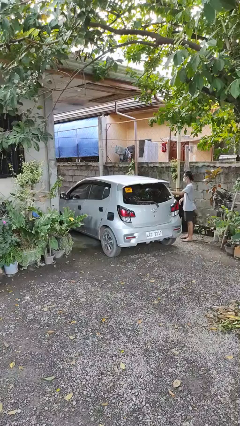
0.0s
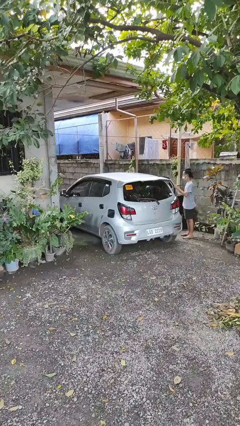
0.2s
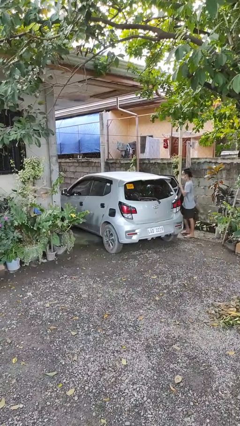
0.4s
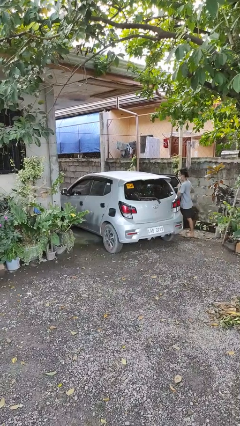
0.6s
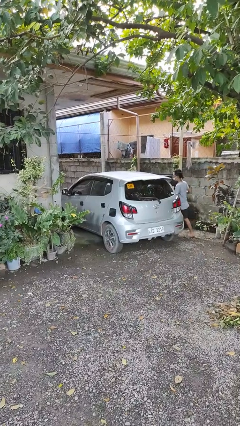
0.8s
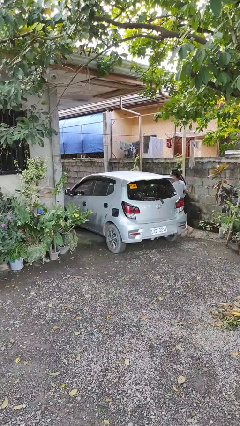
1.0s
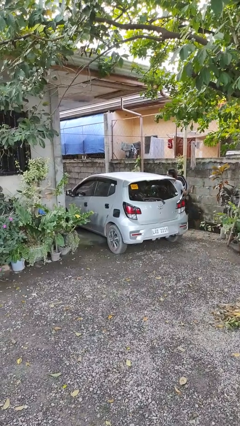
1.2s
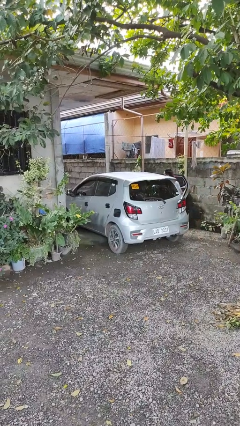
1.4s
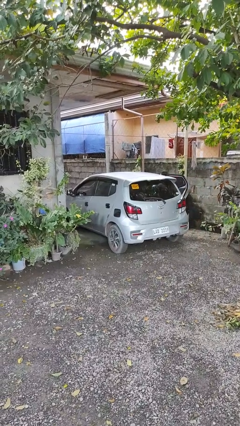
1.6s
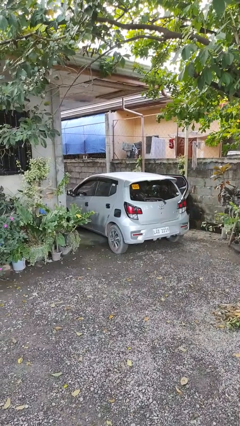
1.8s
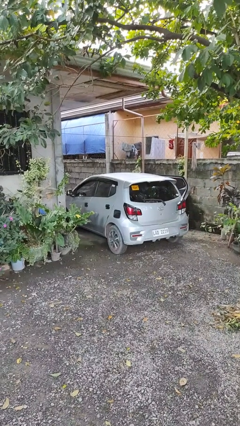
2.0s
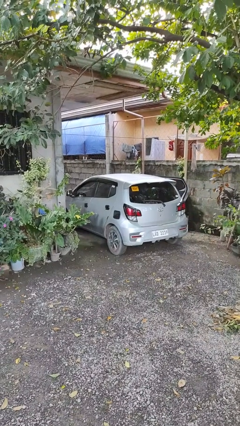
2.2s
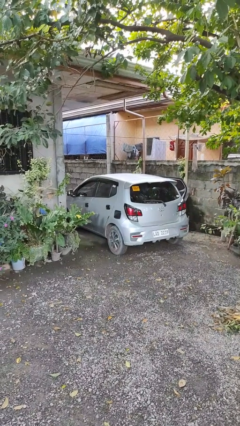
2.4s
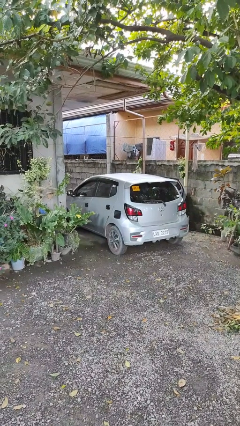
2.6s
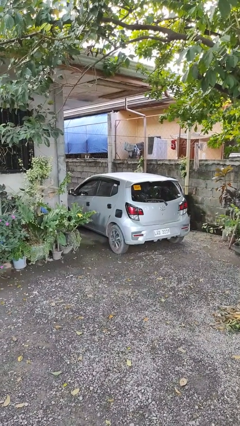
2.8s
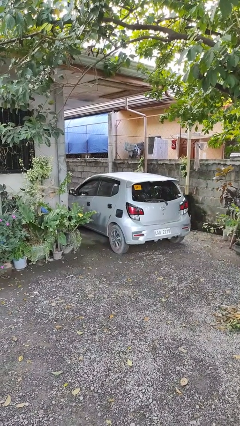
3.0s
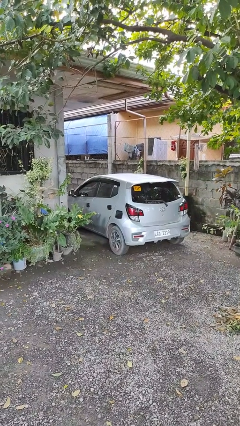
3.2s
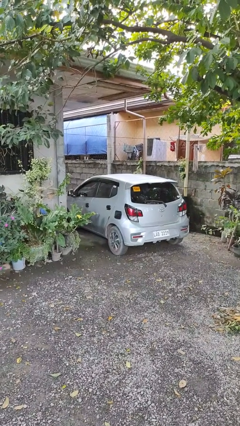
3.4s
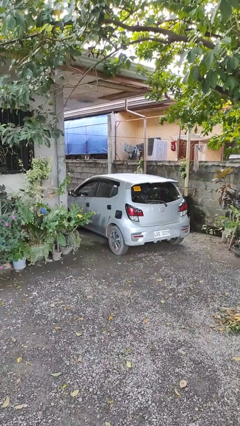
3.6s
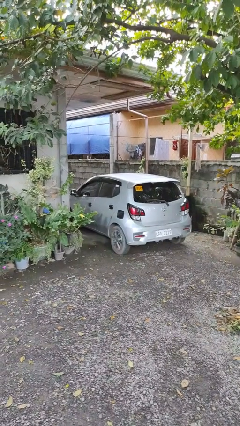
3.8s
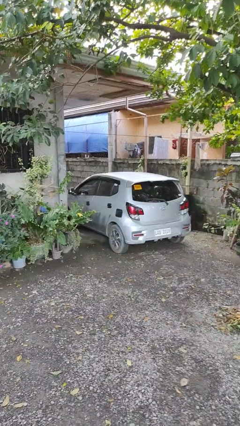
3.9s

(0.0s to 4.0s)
car picks up person

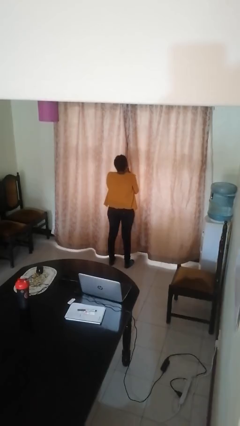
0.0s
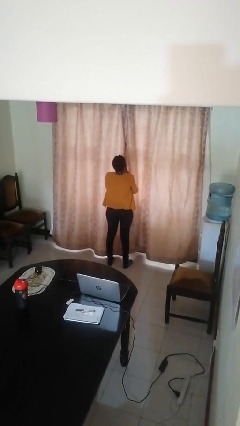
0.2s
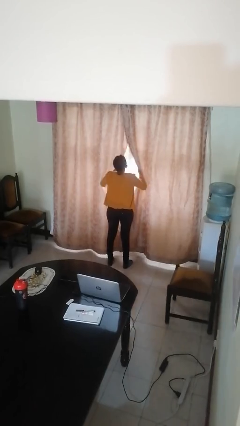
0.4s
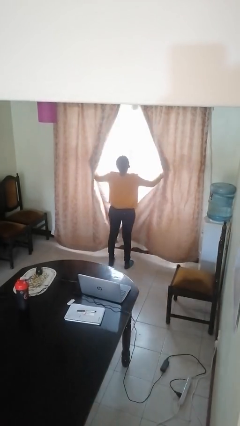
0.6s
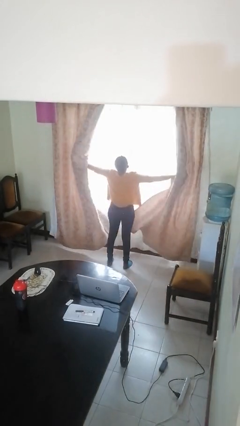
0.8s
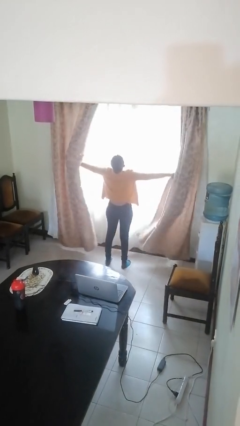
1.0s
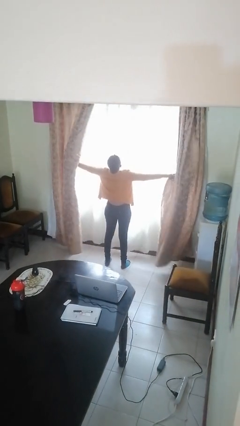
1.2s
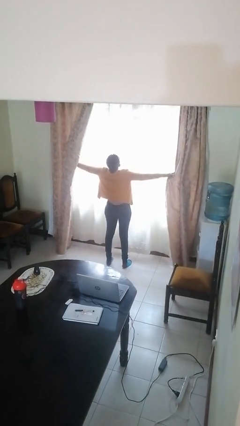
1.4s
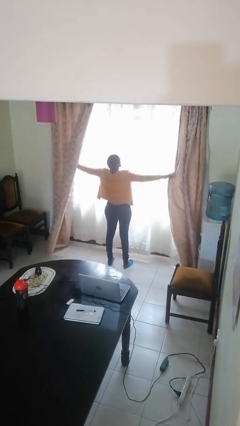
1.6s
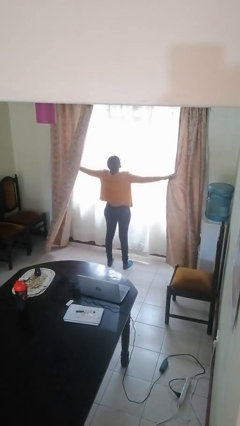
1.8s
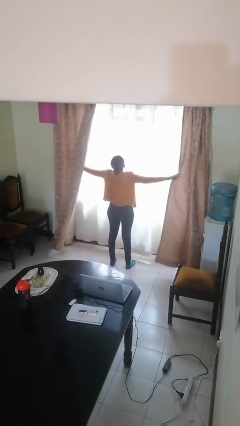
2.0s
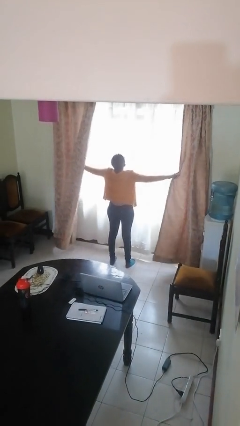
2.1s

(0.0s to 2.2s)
person opens curtains

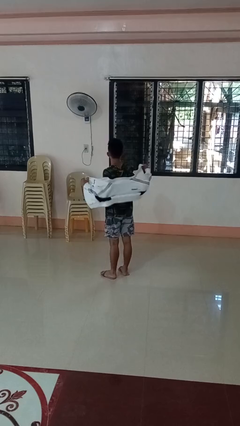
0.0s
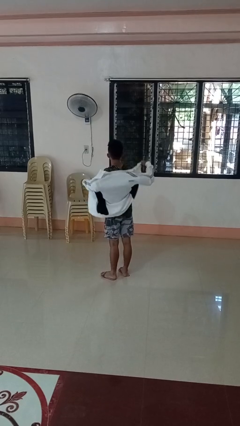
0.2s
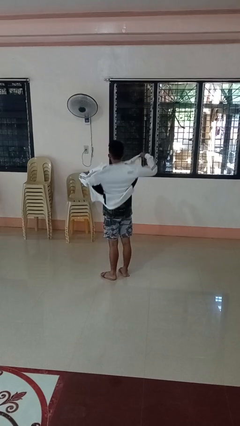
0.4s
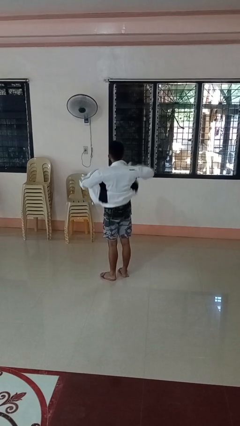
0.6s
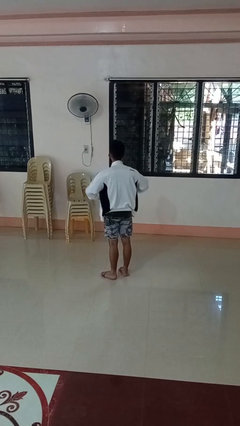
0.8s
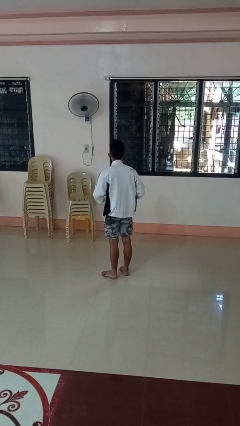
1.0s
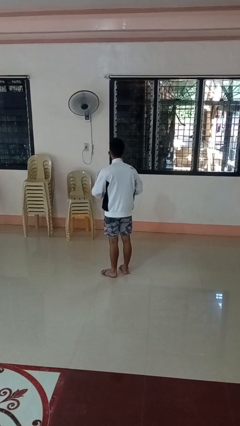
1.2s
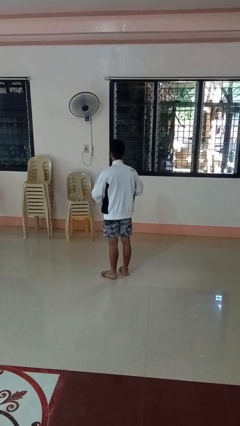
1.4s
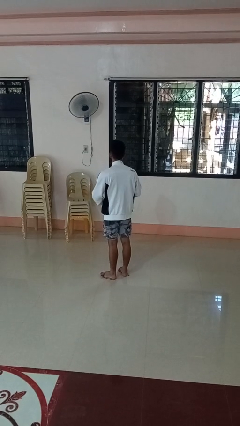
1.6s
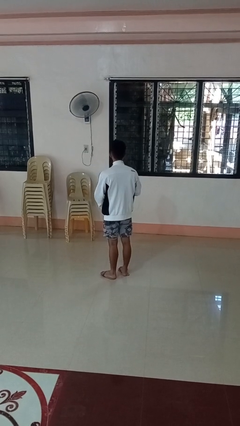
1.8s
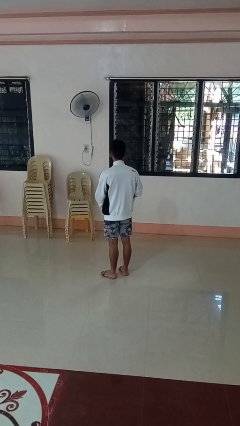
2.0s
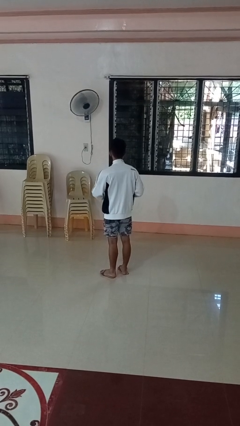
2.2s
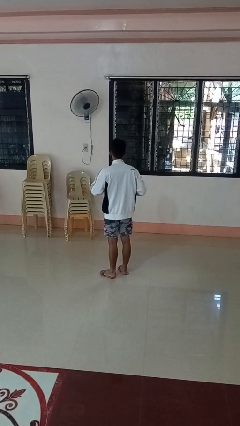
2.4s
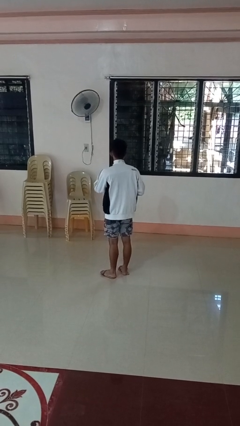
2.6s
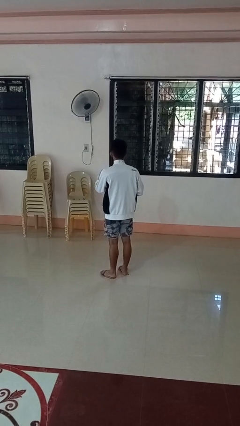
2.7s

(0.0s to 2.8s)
person puts on jacket

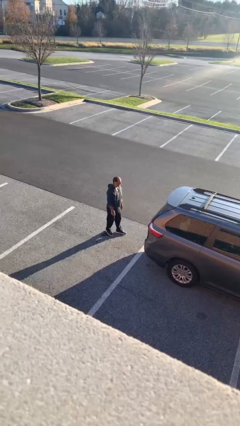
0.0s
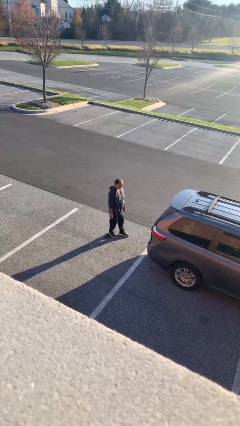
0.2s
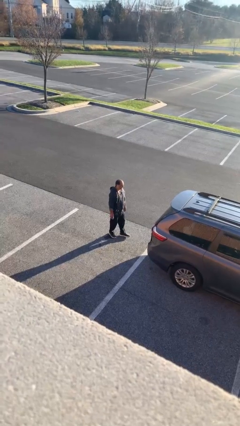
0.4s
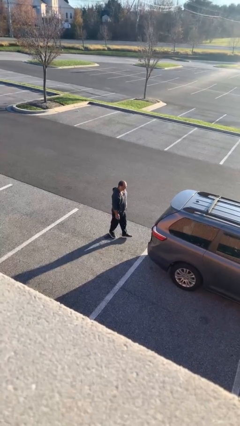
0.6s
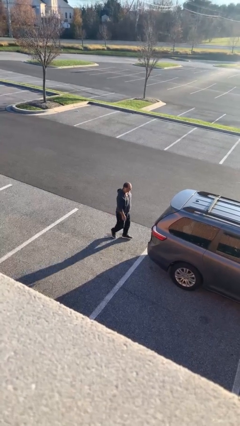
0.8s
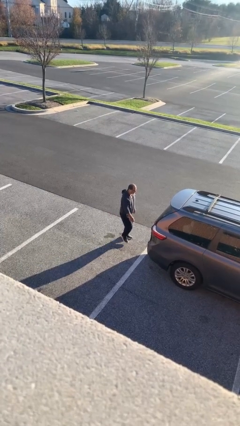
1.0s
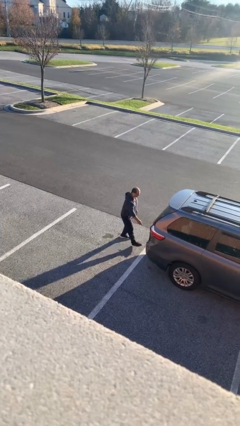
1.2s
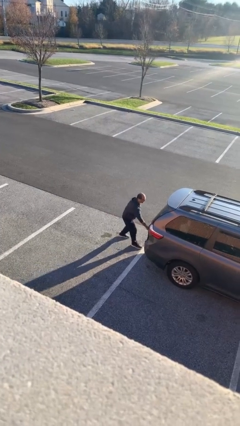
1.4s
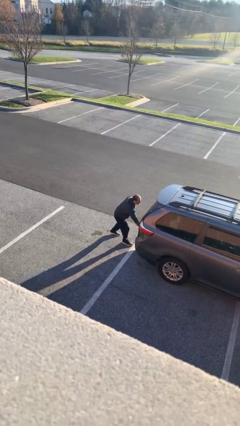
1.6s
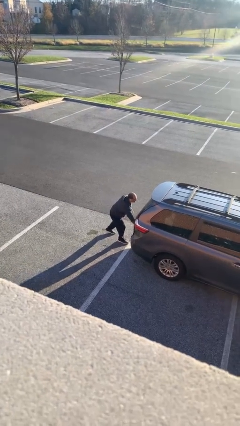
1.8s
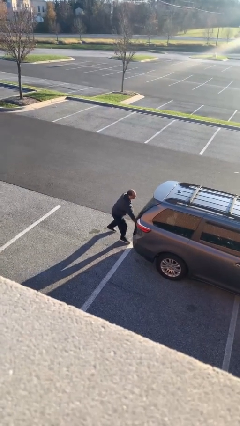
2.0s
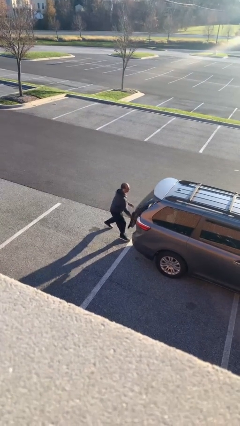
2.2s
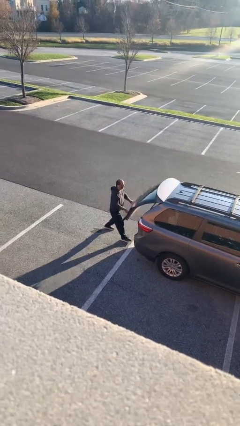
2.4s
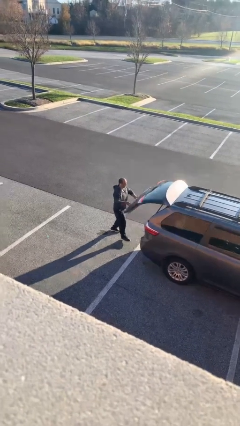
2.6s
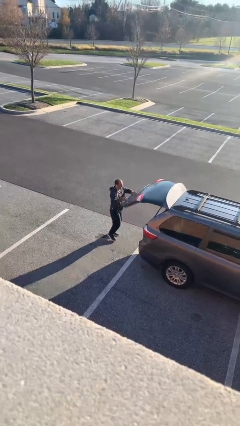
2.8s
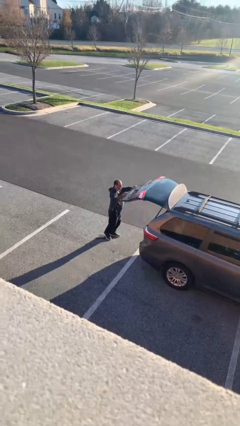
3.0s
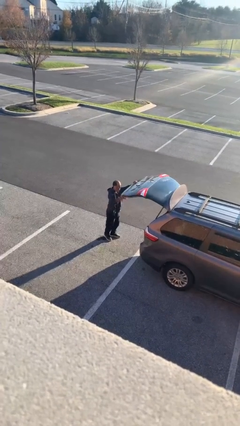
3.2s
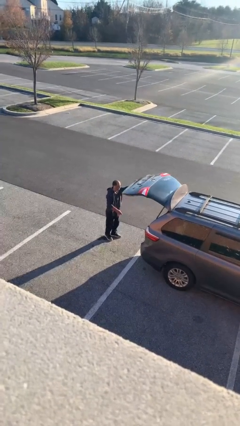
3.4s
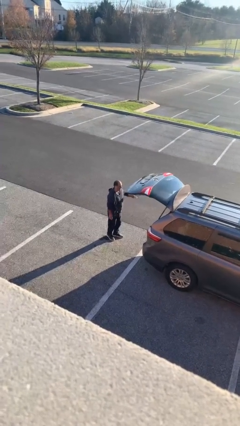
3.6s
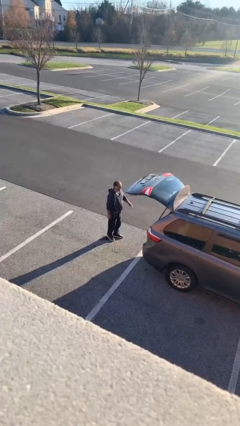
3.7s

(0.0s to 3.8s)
person opens car trunk

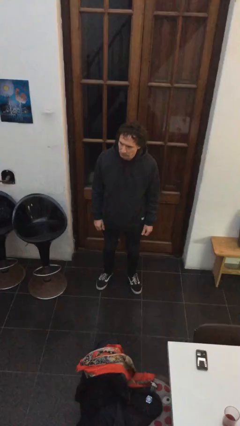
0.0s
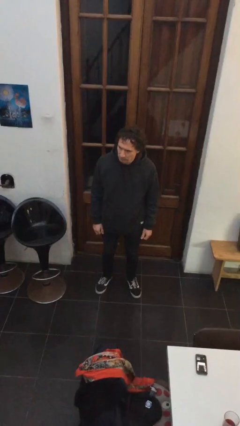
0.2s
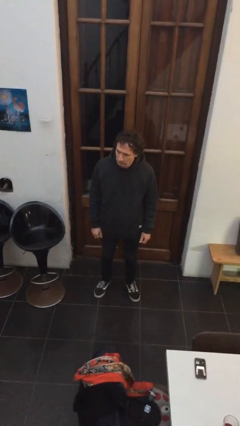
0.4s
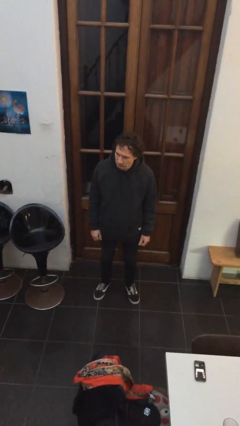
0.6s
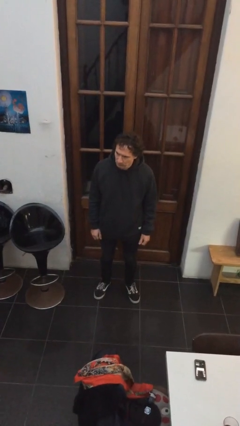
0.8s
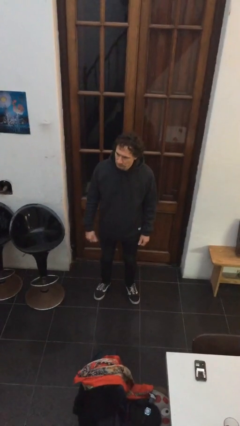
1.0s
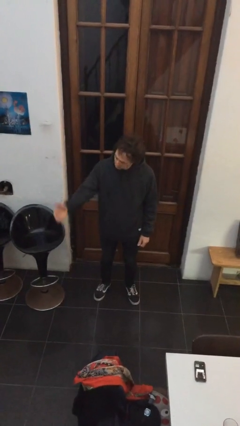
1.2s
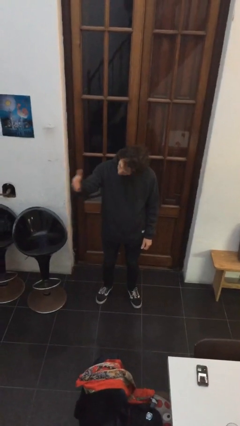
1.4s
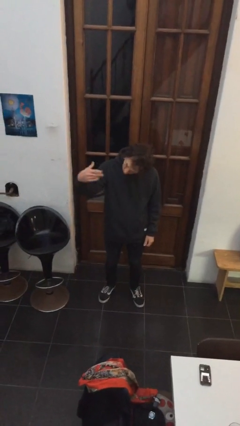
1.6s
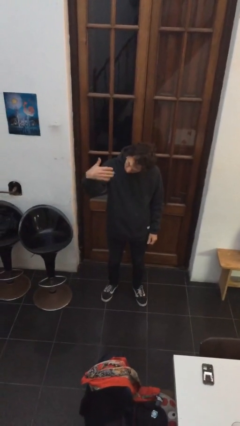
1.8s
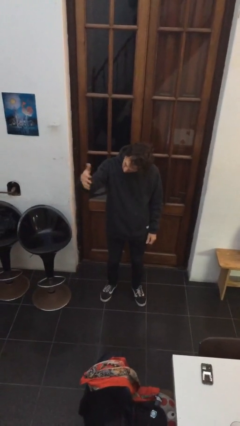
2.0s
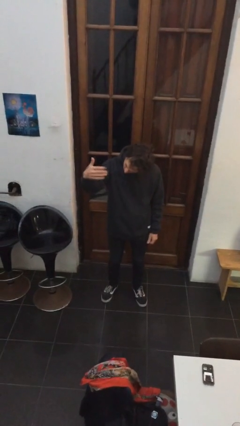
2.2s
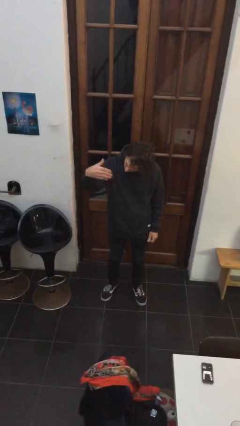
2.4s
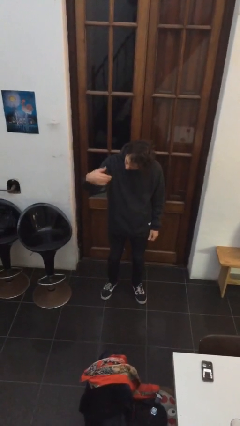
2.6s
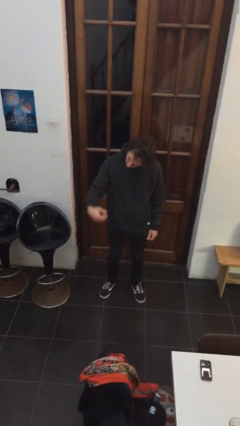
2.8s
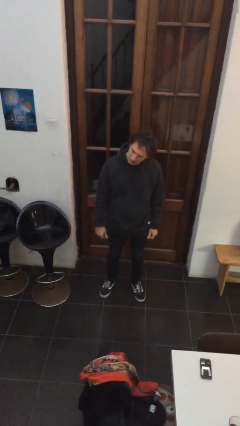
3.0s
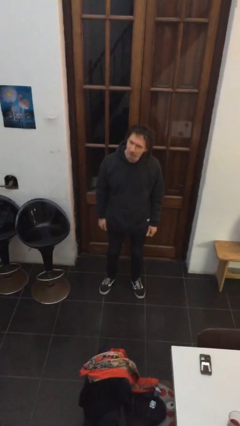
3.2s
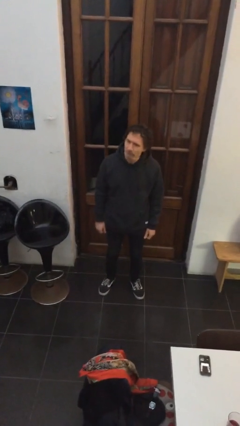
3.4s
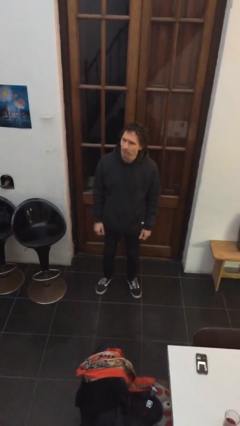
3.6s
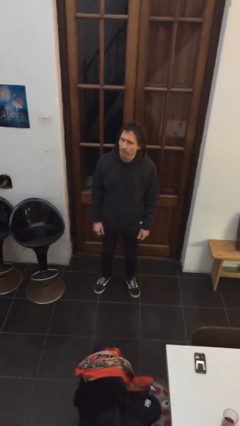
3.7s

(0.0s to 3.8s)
person gestures come here

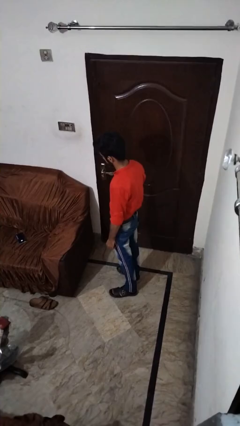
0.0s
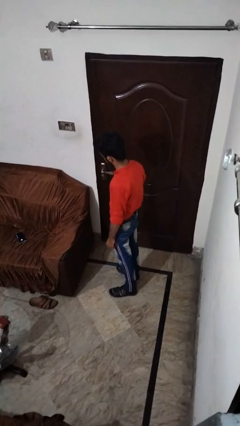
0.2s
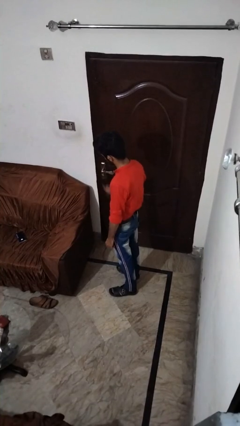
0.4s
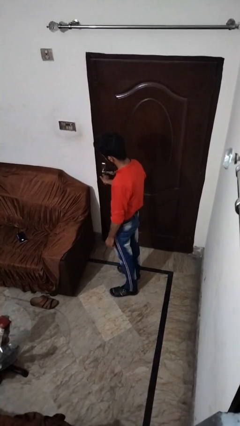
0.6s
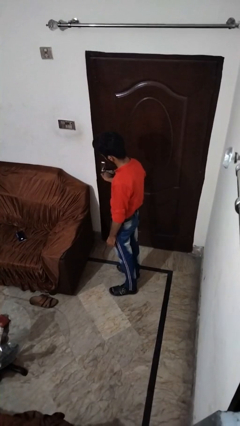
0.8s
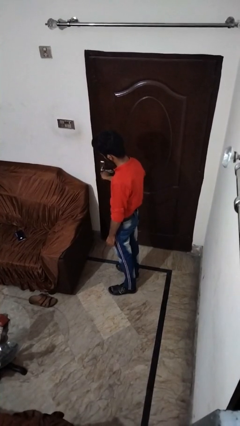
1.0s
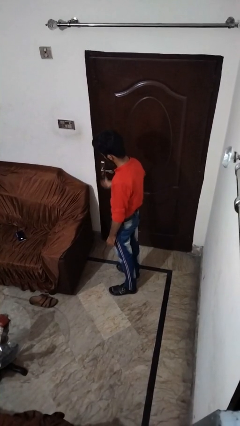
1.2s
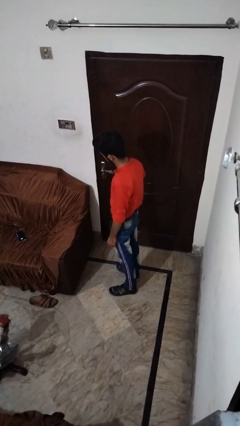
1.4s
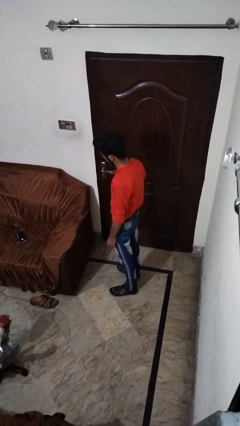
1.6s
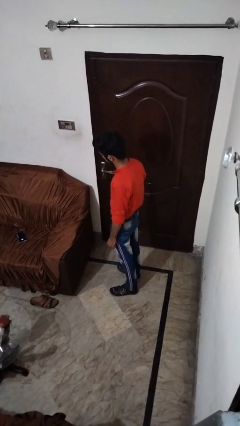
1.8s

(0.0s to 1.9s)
person unlocks door with keys
